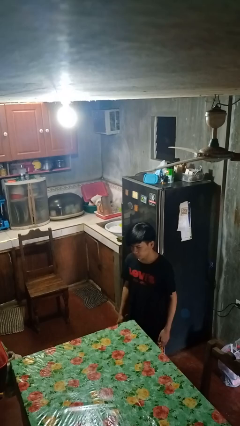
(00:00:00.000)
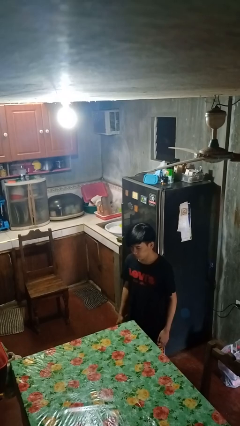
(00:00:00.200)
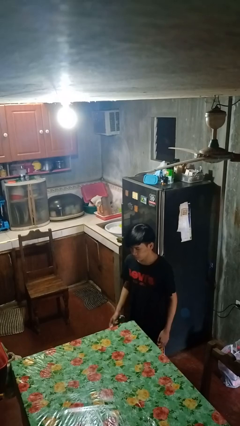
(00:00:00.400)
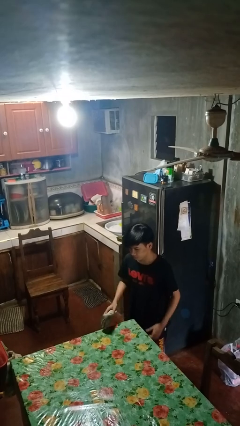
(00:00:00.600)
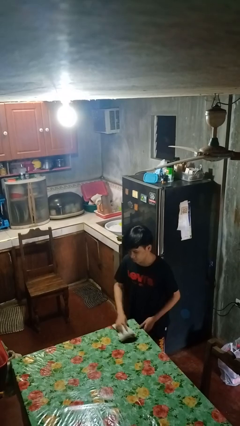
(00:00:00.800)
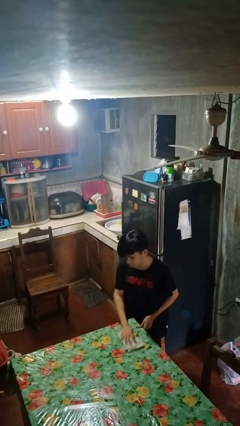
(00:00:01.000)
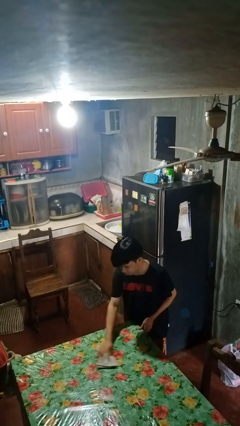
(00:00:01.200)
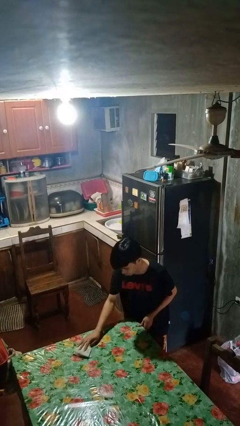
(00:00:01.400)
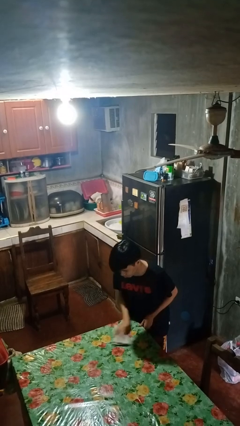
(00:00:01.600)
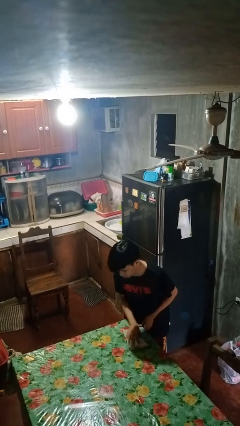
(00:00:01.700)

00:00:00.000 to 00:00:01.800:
person cleans table with rag

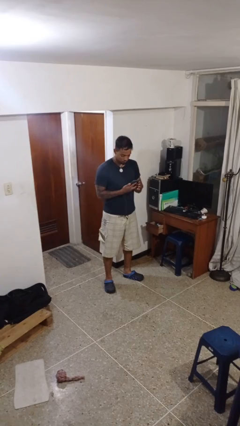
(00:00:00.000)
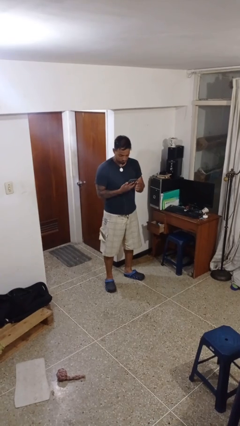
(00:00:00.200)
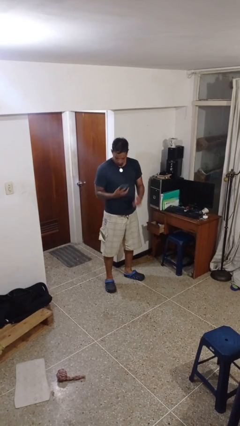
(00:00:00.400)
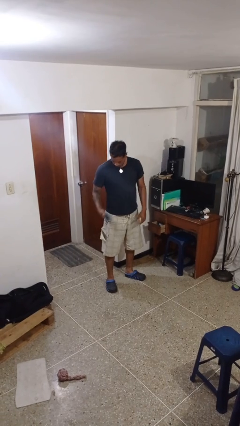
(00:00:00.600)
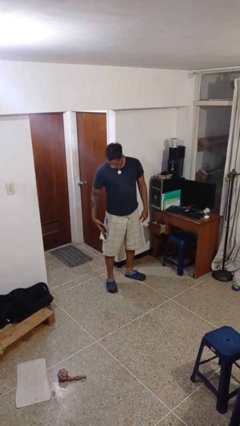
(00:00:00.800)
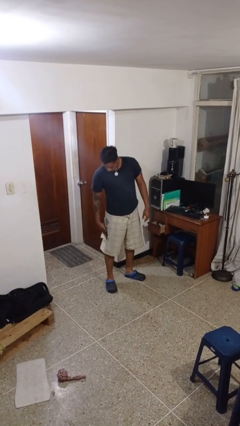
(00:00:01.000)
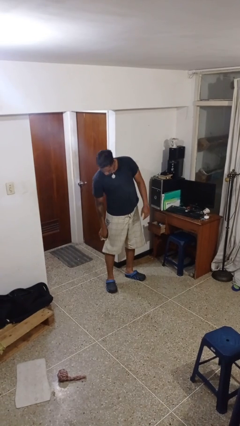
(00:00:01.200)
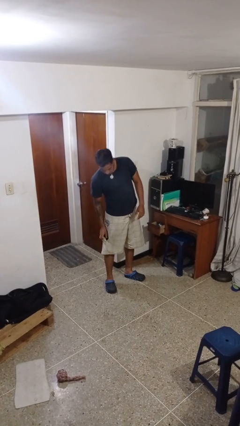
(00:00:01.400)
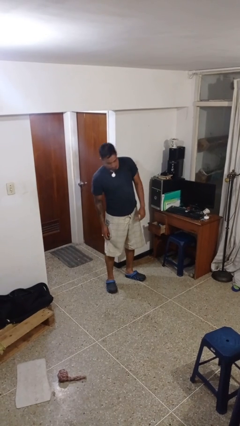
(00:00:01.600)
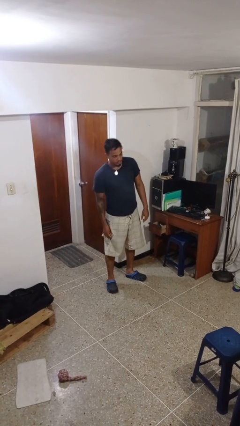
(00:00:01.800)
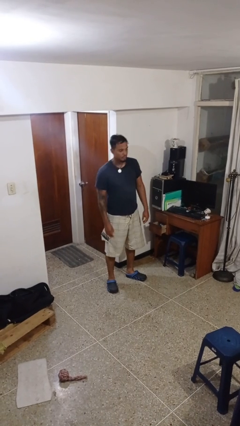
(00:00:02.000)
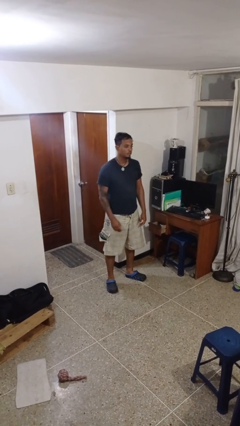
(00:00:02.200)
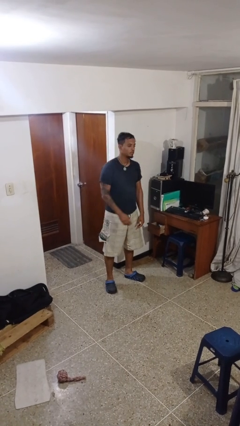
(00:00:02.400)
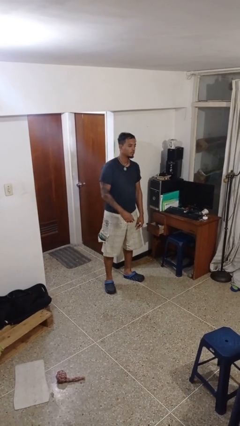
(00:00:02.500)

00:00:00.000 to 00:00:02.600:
person puts phone into pocket

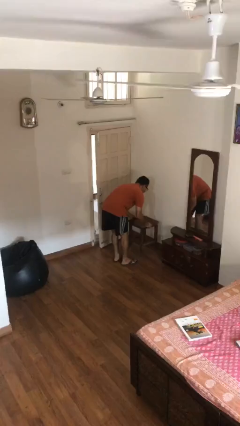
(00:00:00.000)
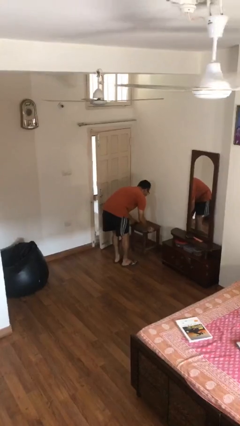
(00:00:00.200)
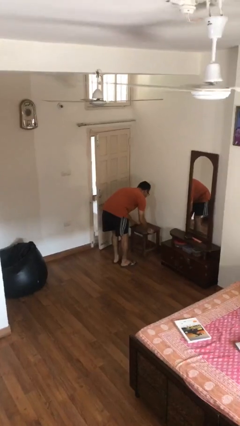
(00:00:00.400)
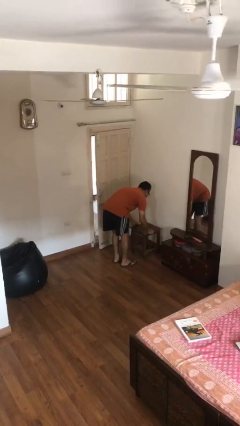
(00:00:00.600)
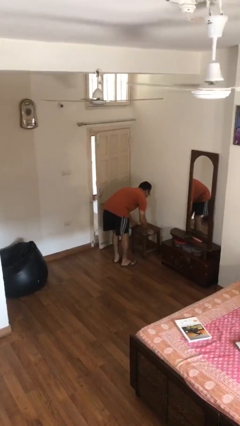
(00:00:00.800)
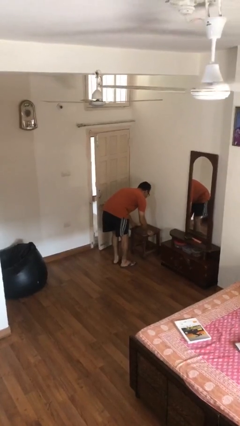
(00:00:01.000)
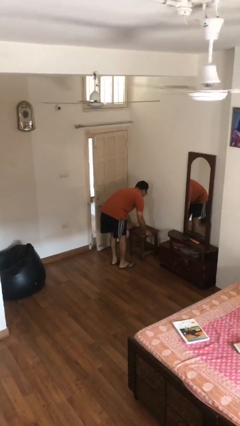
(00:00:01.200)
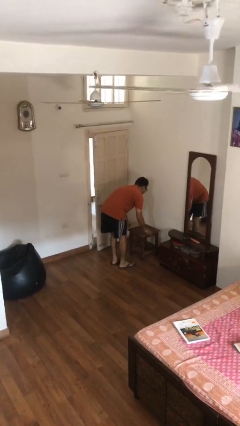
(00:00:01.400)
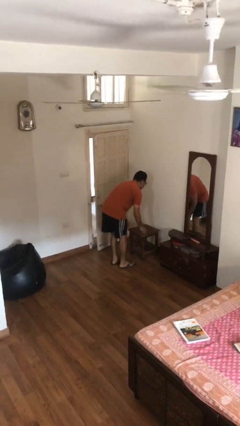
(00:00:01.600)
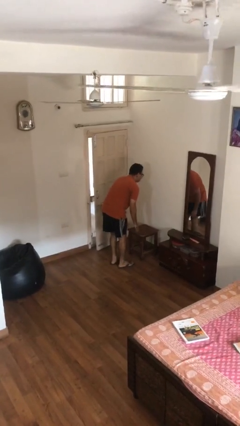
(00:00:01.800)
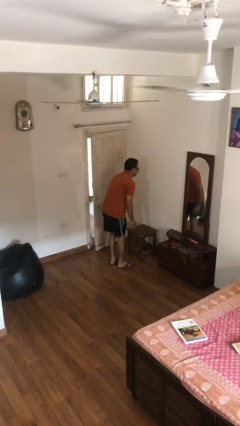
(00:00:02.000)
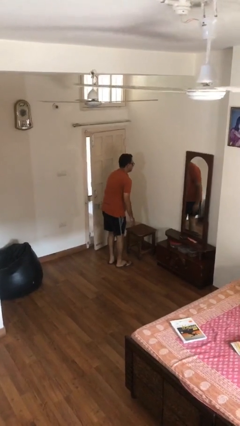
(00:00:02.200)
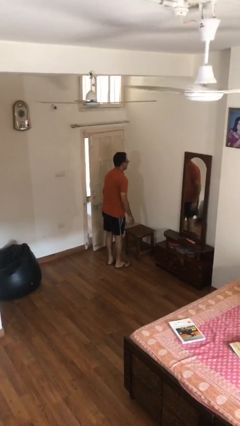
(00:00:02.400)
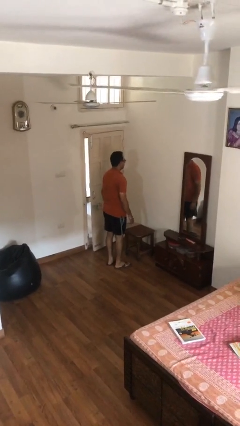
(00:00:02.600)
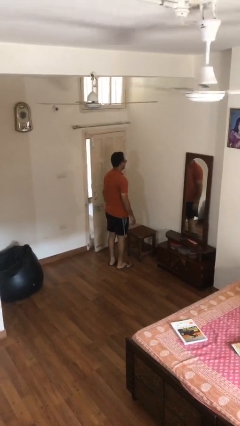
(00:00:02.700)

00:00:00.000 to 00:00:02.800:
person puts down object on floor

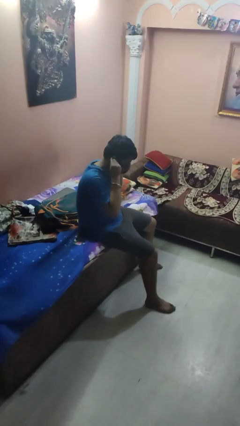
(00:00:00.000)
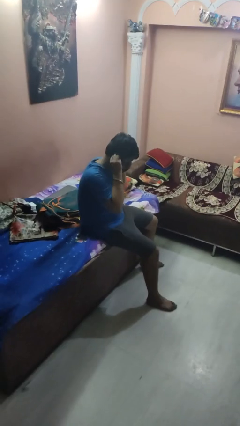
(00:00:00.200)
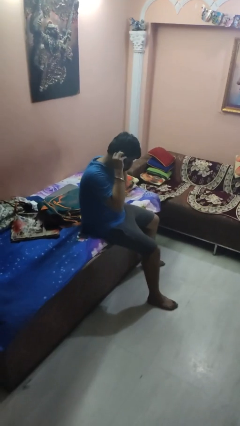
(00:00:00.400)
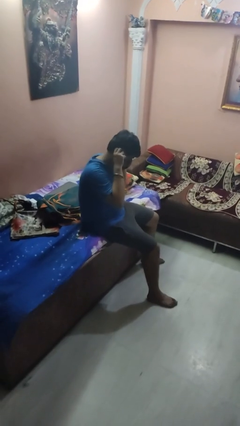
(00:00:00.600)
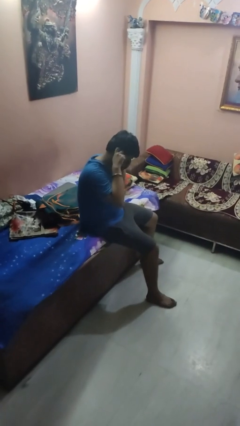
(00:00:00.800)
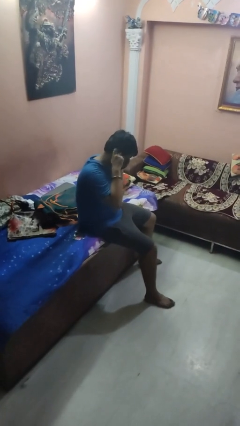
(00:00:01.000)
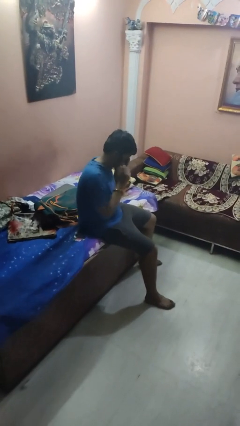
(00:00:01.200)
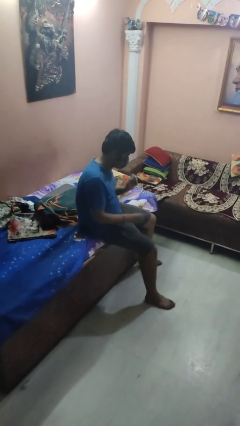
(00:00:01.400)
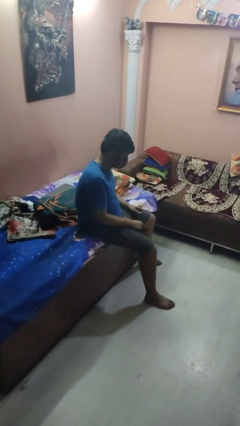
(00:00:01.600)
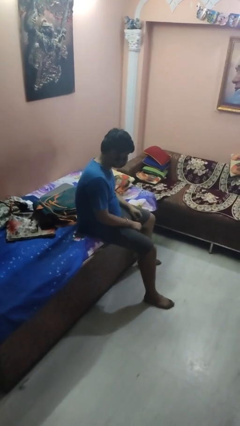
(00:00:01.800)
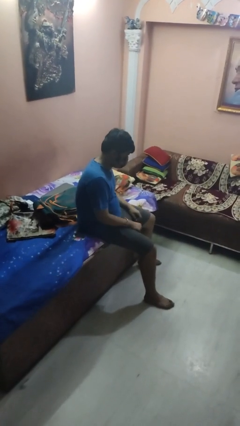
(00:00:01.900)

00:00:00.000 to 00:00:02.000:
person puts on facemask

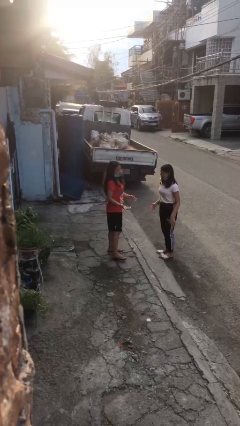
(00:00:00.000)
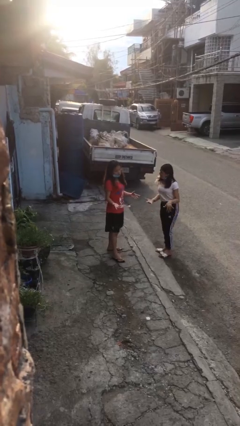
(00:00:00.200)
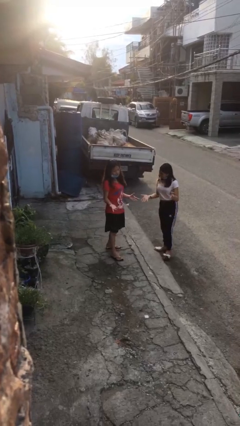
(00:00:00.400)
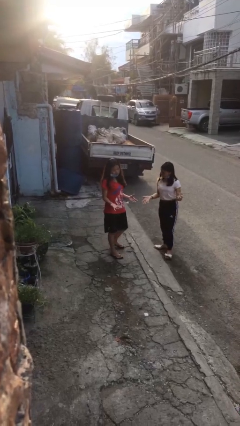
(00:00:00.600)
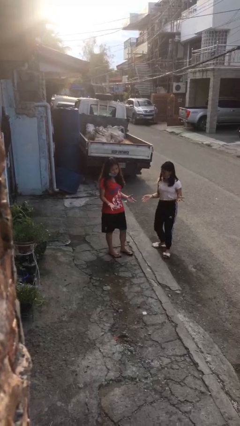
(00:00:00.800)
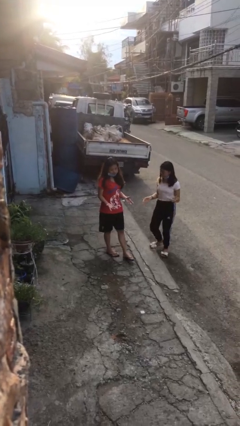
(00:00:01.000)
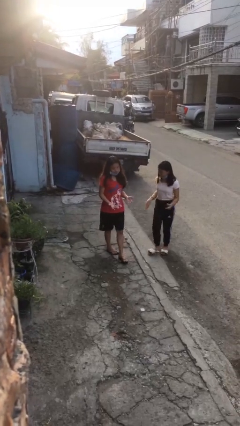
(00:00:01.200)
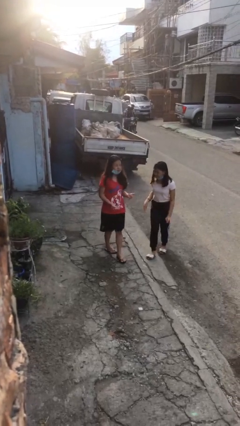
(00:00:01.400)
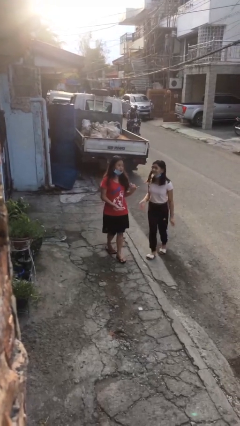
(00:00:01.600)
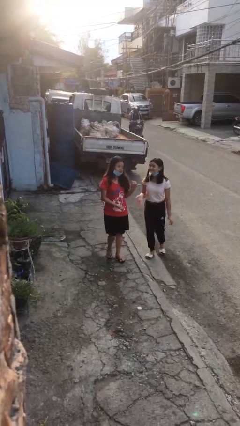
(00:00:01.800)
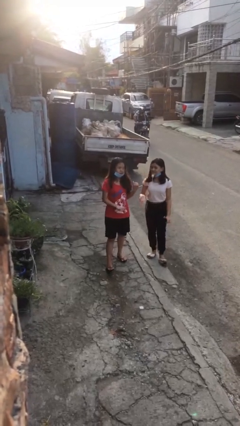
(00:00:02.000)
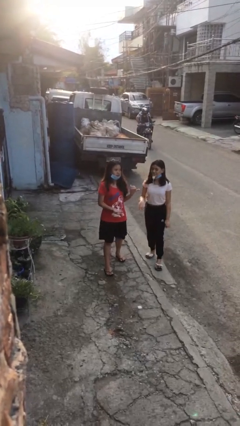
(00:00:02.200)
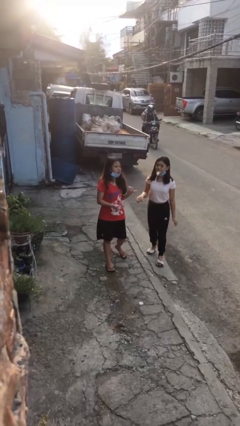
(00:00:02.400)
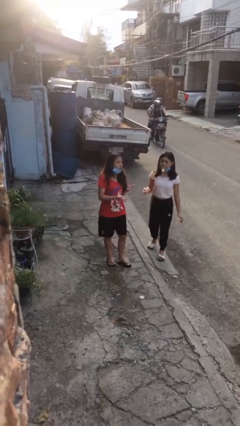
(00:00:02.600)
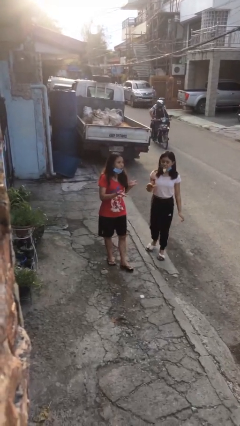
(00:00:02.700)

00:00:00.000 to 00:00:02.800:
person talks to person

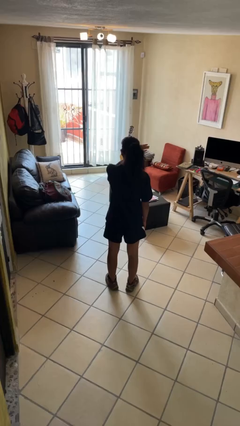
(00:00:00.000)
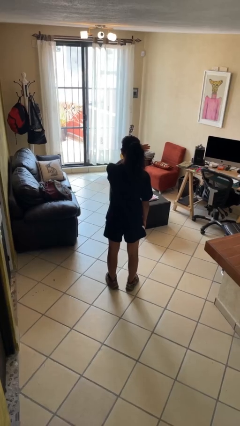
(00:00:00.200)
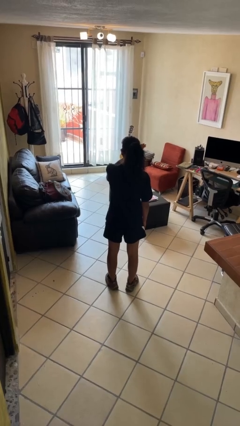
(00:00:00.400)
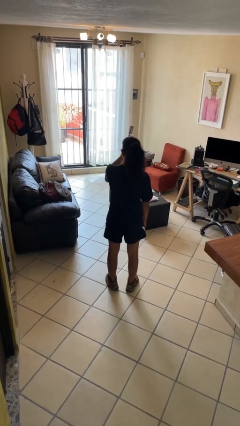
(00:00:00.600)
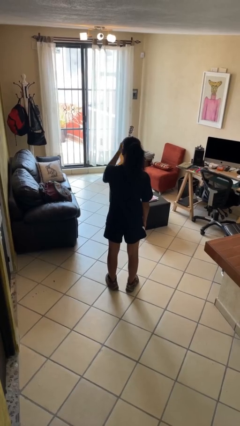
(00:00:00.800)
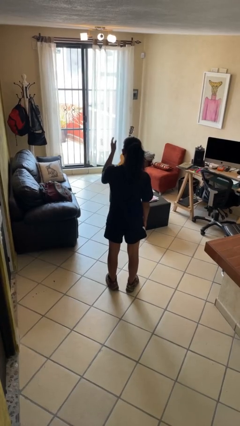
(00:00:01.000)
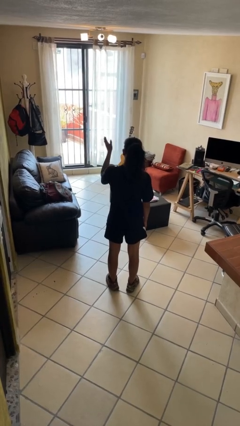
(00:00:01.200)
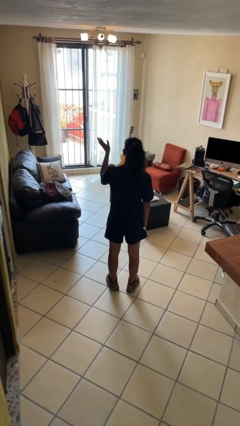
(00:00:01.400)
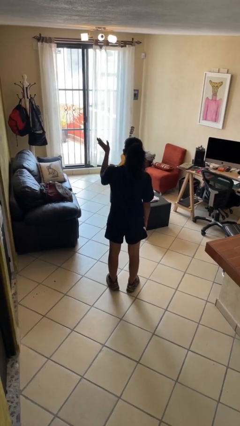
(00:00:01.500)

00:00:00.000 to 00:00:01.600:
person gestures swipe left

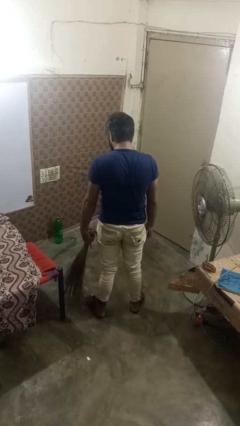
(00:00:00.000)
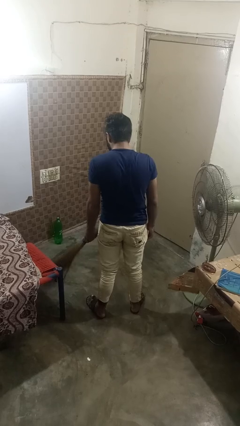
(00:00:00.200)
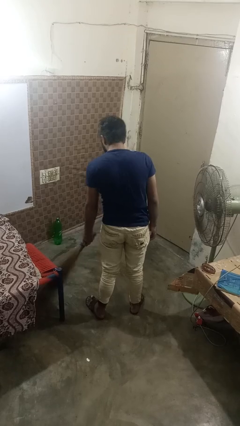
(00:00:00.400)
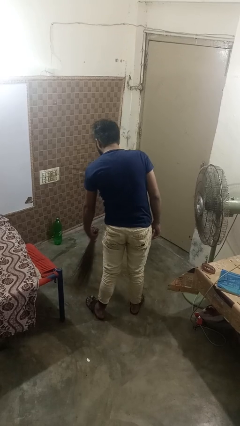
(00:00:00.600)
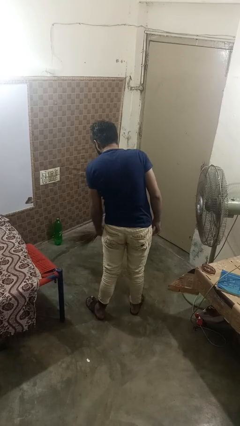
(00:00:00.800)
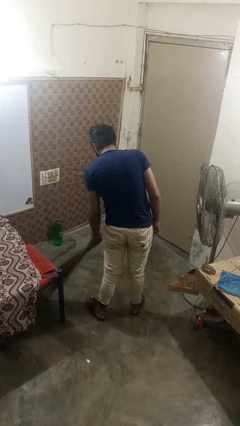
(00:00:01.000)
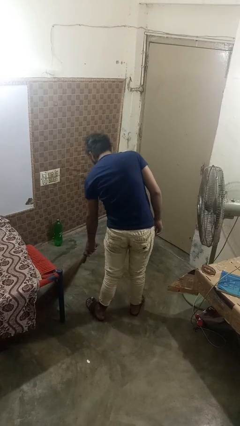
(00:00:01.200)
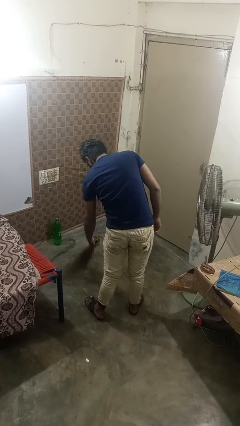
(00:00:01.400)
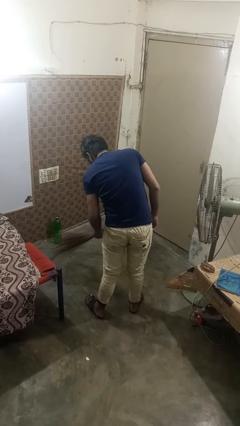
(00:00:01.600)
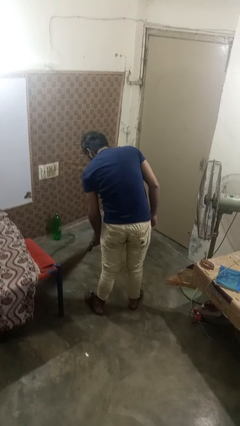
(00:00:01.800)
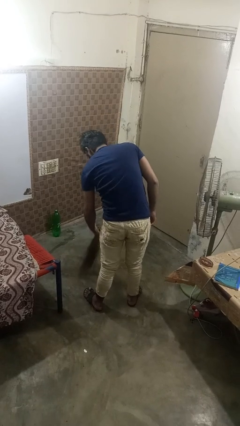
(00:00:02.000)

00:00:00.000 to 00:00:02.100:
person sweeps floor

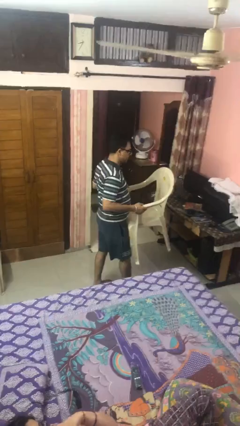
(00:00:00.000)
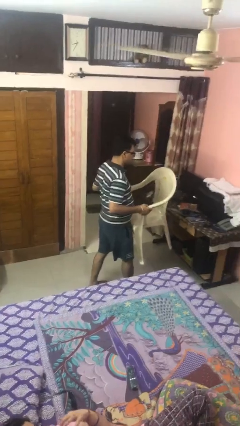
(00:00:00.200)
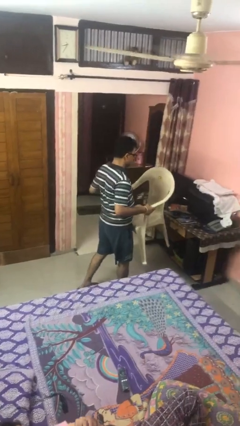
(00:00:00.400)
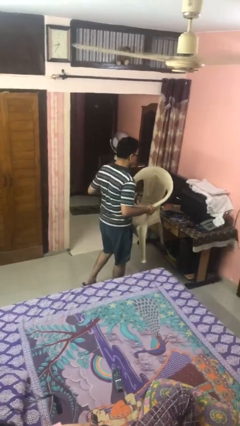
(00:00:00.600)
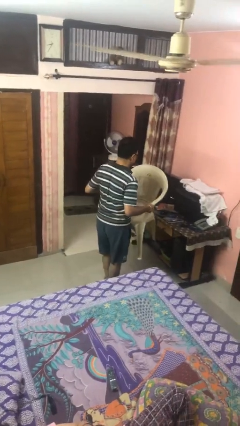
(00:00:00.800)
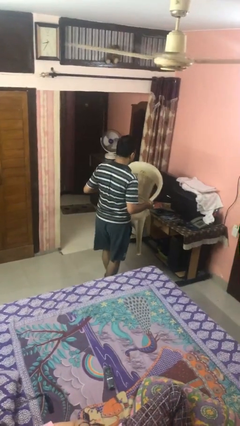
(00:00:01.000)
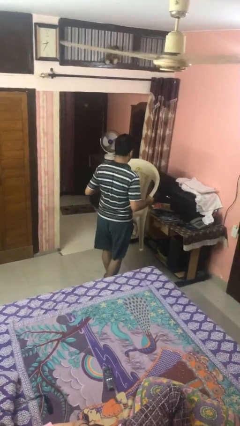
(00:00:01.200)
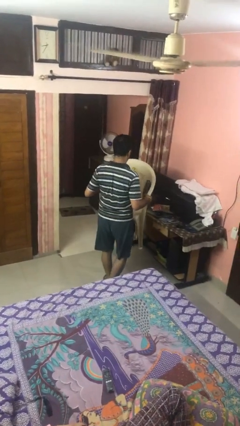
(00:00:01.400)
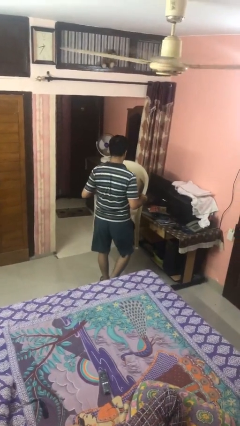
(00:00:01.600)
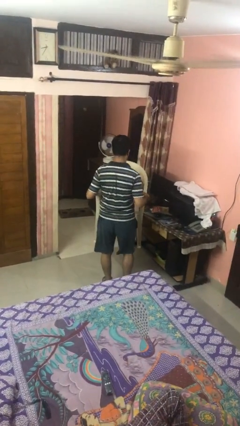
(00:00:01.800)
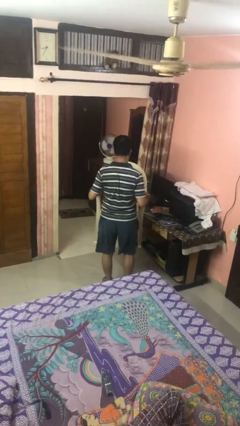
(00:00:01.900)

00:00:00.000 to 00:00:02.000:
person carries furniture
